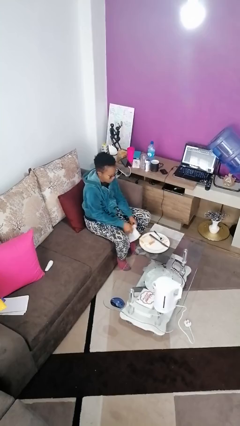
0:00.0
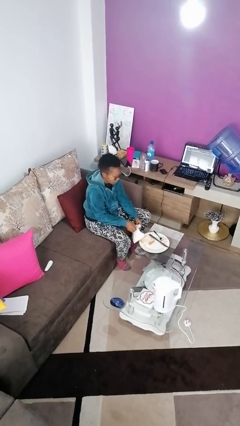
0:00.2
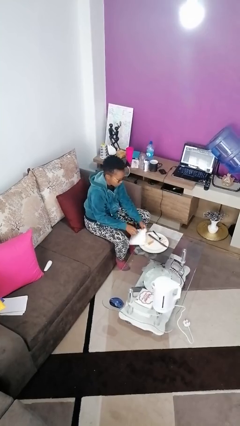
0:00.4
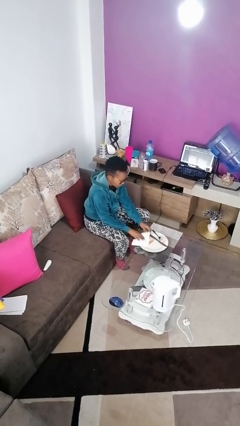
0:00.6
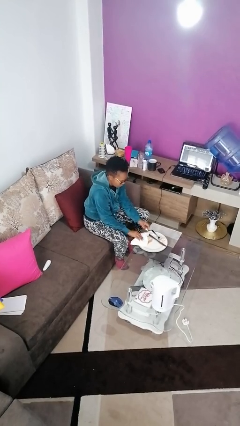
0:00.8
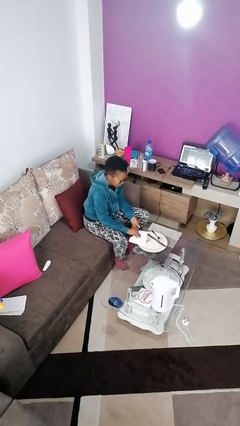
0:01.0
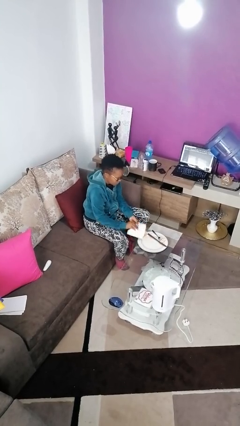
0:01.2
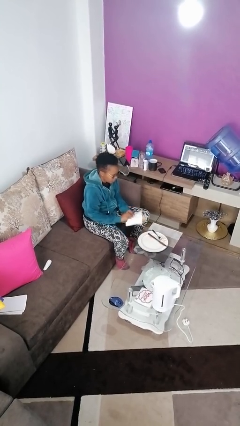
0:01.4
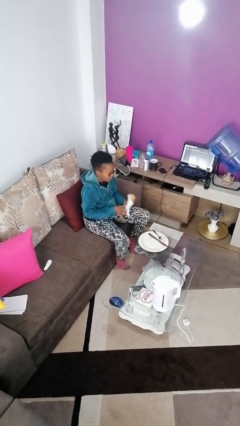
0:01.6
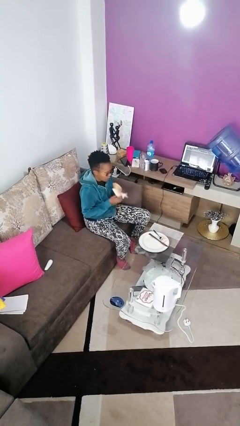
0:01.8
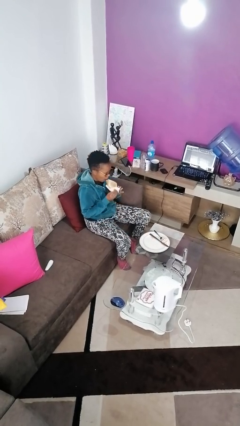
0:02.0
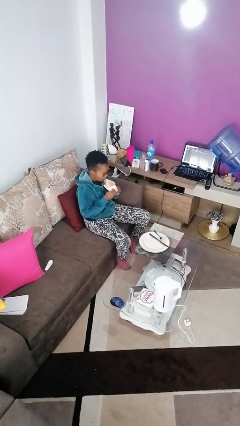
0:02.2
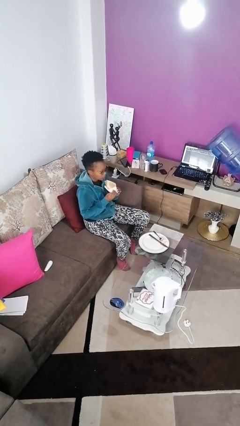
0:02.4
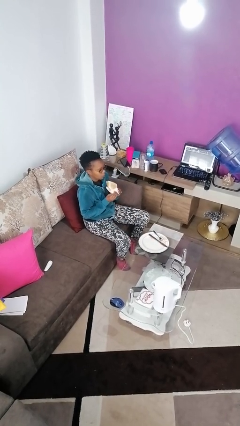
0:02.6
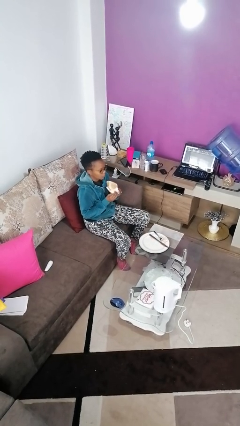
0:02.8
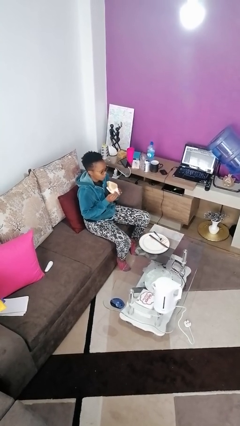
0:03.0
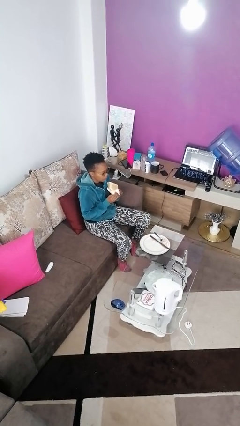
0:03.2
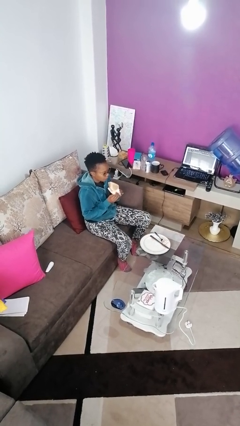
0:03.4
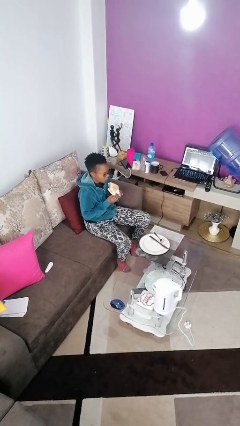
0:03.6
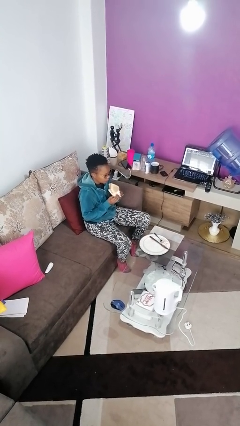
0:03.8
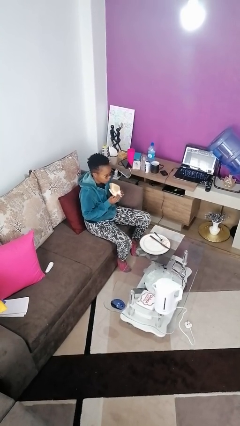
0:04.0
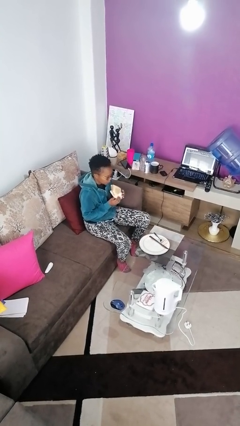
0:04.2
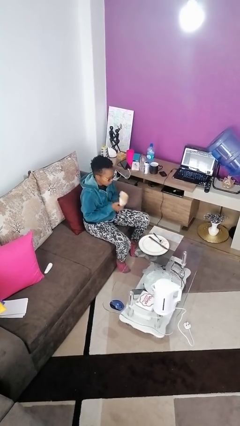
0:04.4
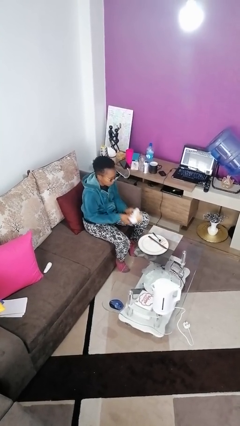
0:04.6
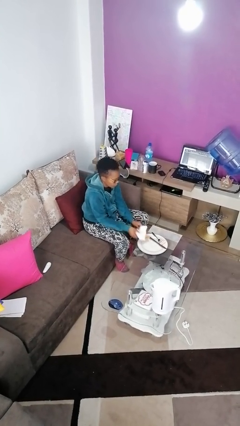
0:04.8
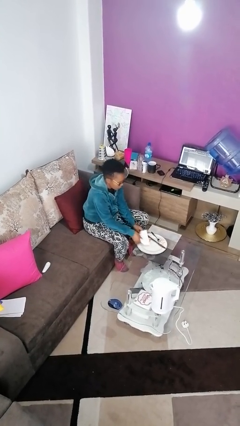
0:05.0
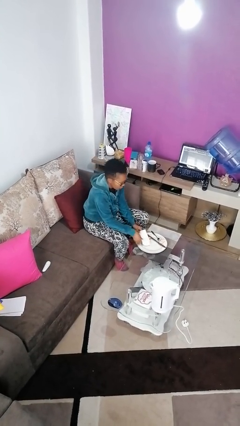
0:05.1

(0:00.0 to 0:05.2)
person eats with hands

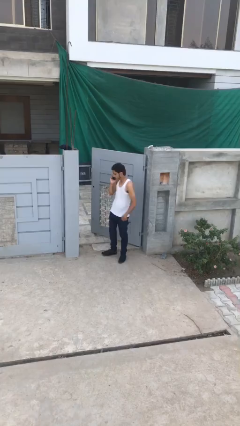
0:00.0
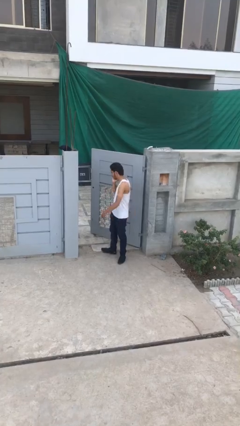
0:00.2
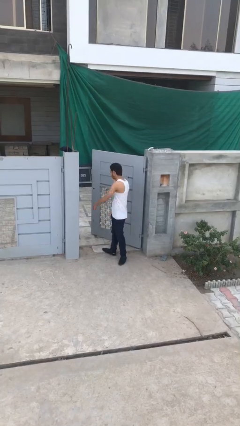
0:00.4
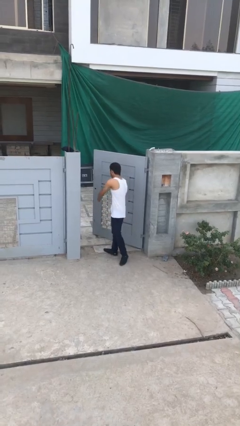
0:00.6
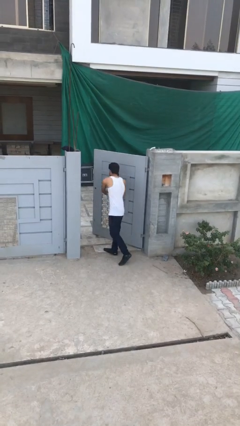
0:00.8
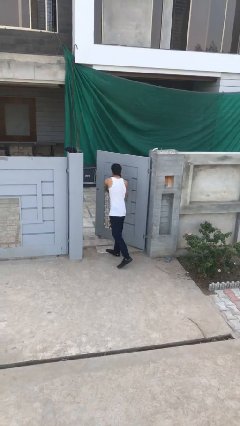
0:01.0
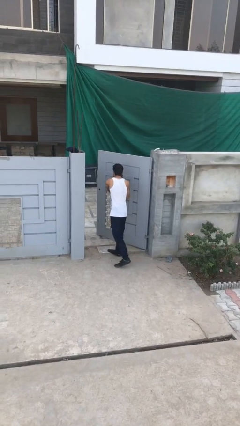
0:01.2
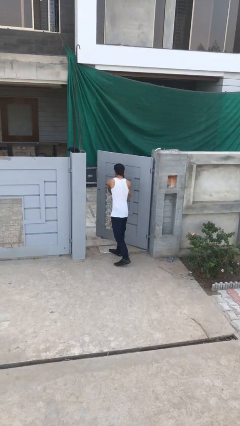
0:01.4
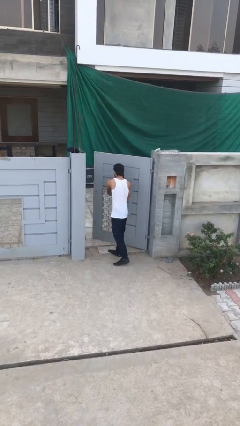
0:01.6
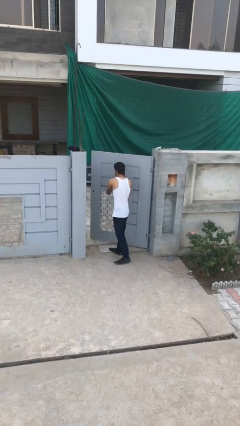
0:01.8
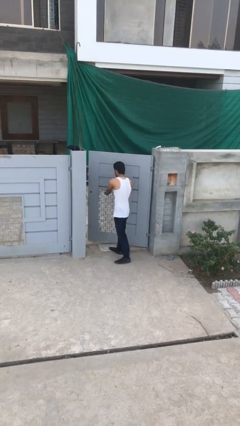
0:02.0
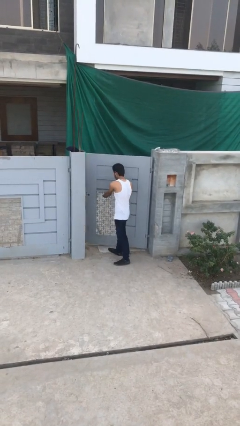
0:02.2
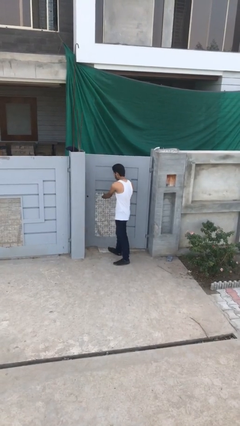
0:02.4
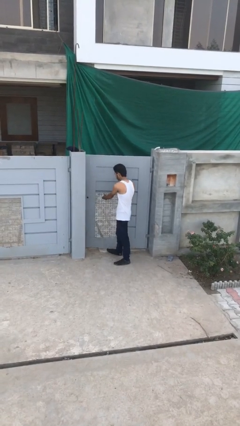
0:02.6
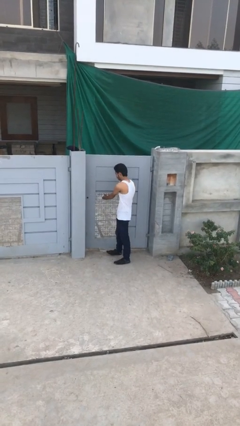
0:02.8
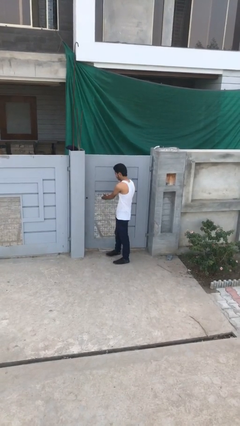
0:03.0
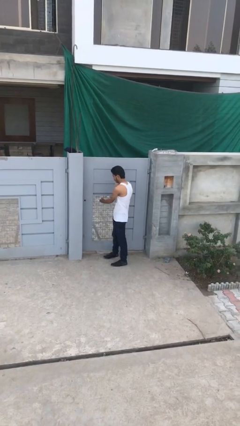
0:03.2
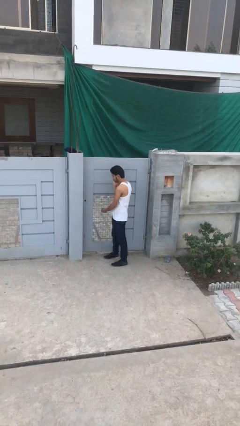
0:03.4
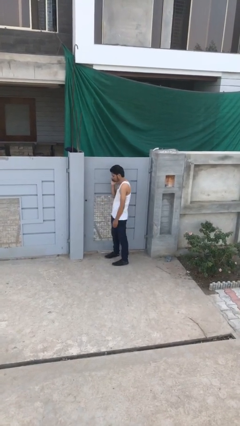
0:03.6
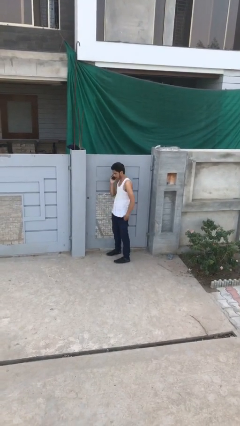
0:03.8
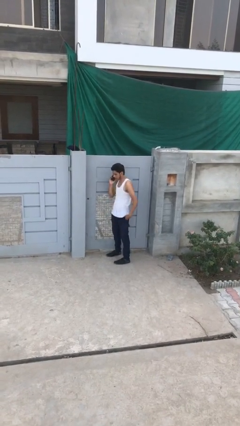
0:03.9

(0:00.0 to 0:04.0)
person closes facility door

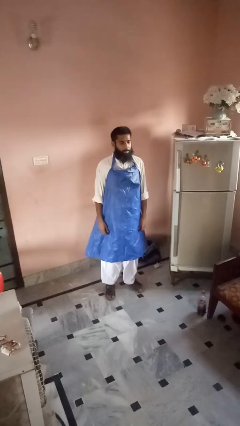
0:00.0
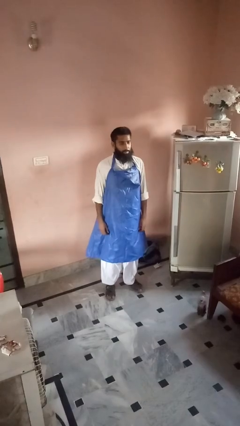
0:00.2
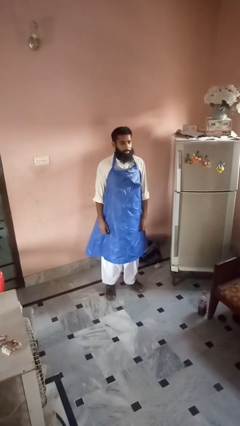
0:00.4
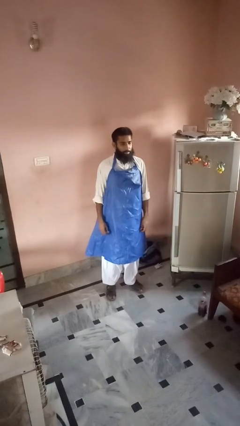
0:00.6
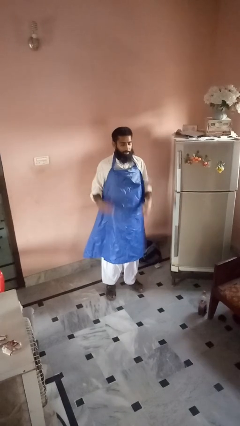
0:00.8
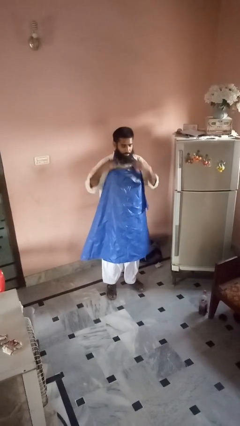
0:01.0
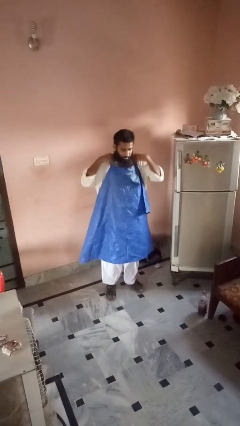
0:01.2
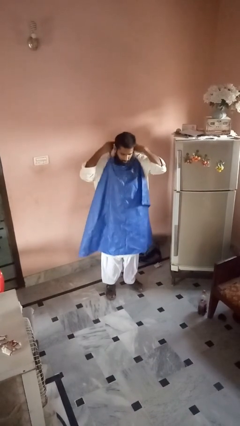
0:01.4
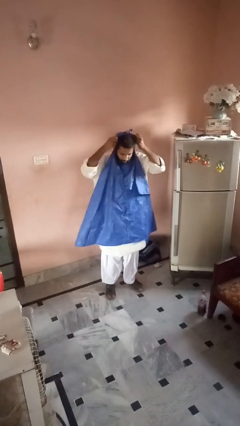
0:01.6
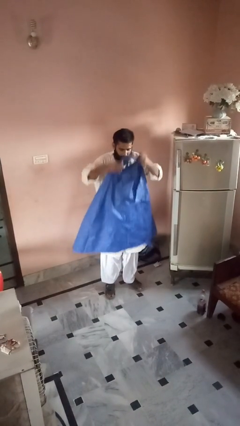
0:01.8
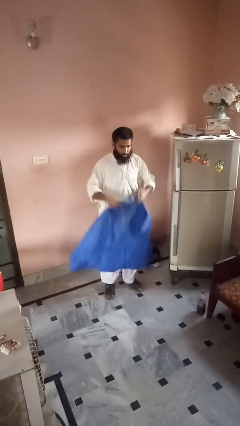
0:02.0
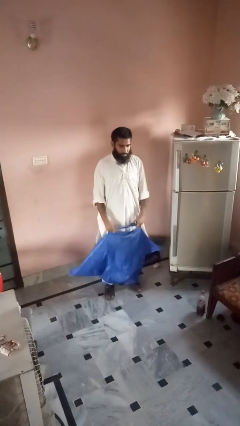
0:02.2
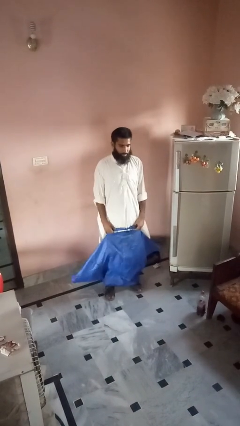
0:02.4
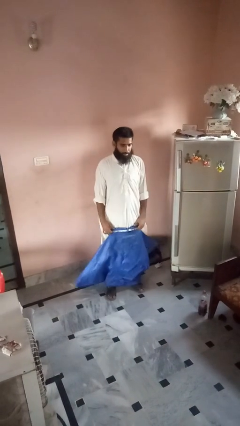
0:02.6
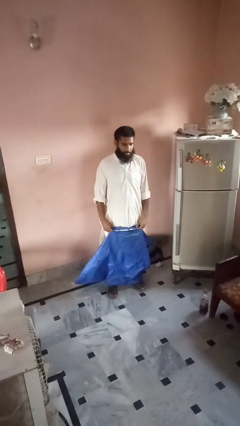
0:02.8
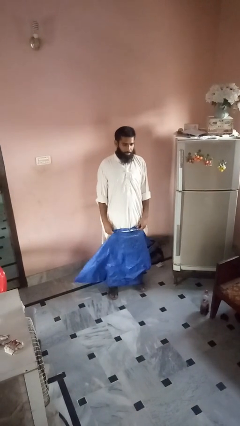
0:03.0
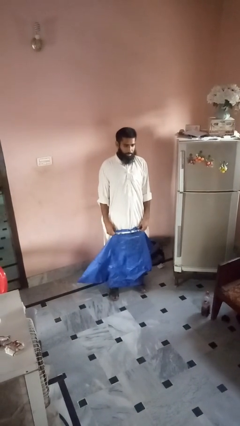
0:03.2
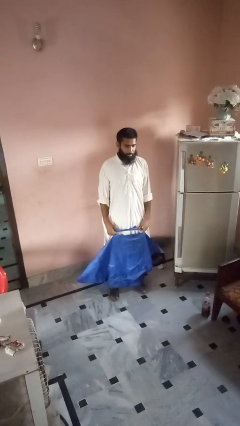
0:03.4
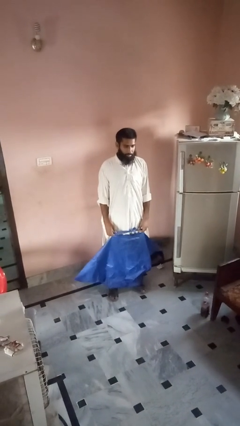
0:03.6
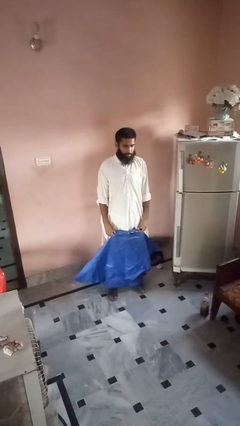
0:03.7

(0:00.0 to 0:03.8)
person takes off apron

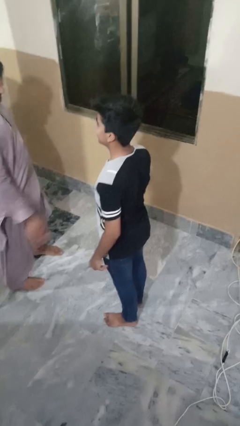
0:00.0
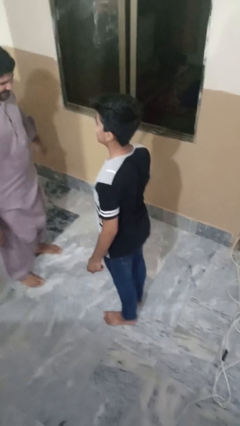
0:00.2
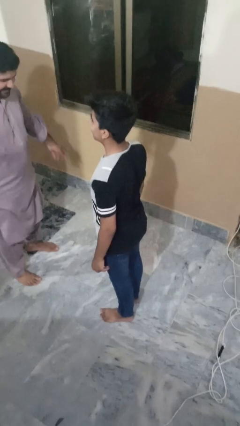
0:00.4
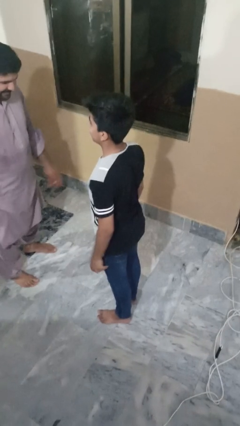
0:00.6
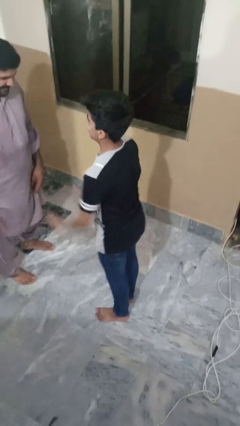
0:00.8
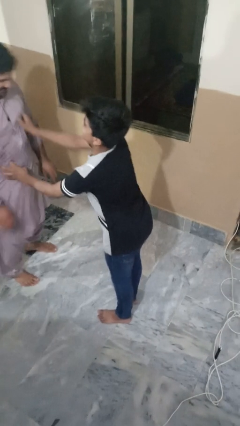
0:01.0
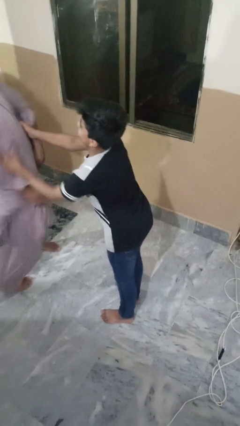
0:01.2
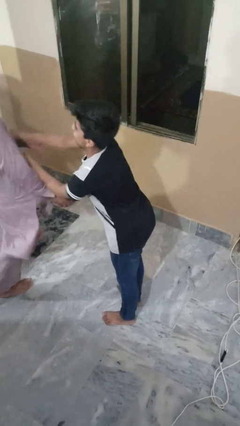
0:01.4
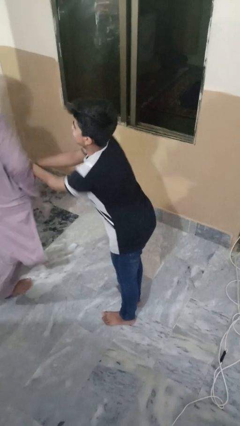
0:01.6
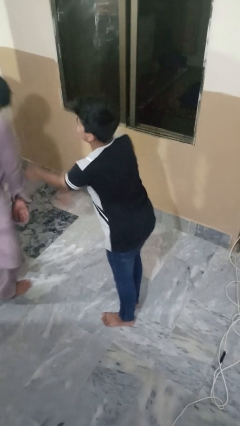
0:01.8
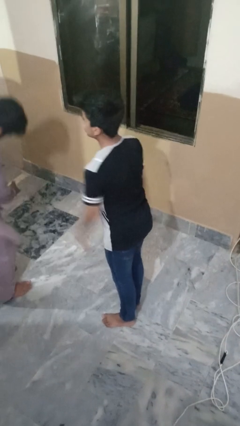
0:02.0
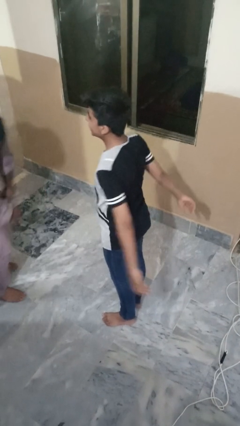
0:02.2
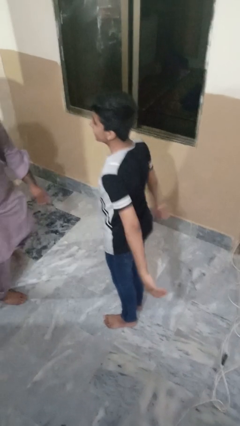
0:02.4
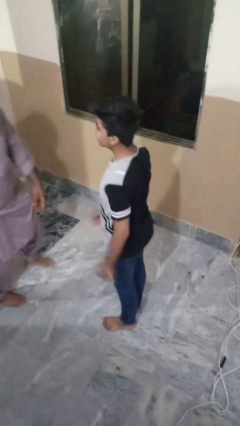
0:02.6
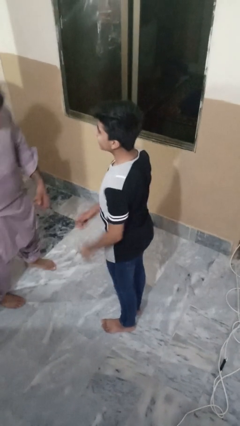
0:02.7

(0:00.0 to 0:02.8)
person tickles person

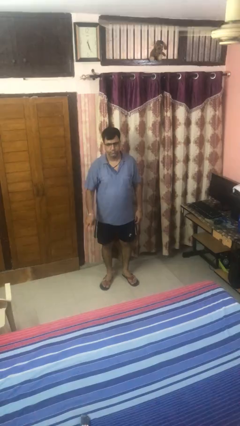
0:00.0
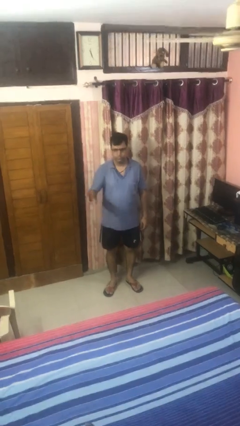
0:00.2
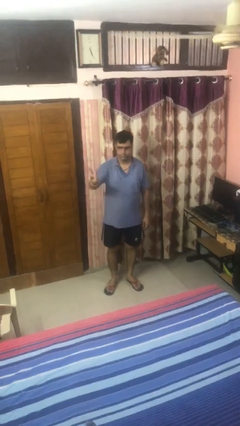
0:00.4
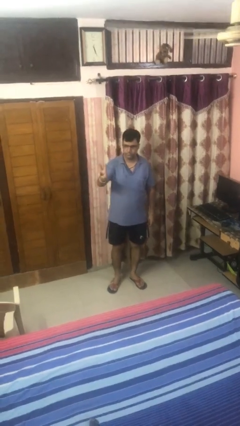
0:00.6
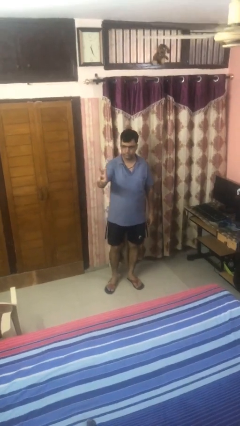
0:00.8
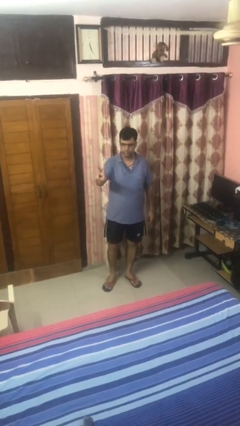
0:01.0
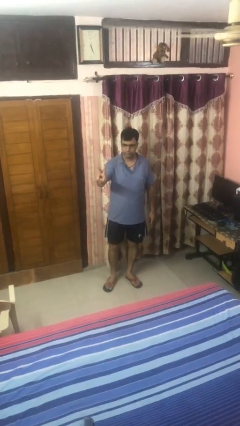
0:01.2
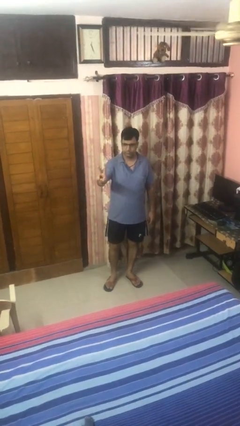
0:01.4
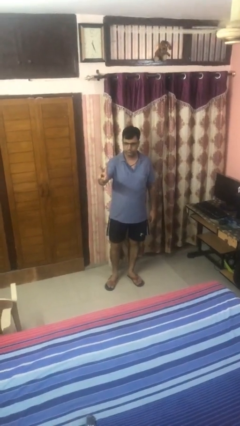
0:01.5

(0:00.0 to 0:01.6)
person gestures peace

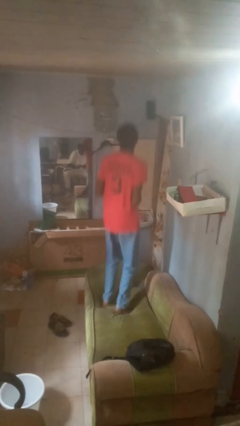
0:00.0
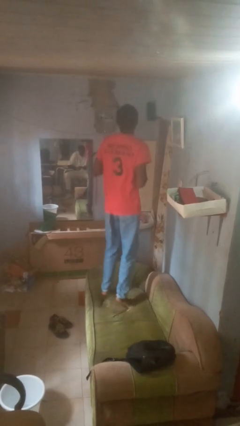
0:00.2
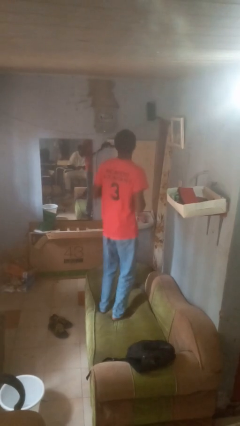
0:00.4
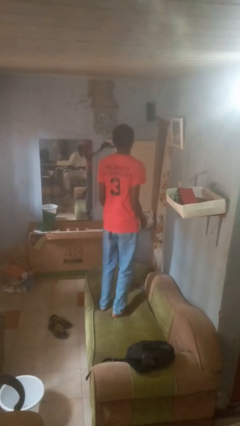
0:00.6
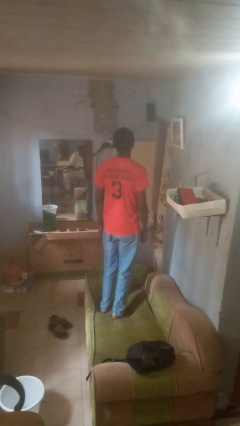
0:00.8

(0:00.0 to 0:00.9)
person jumps on couch
